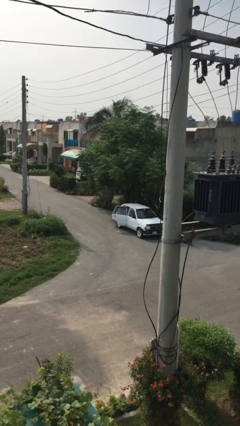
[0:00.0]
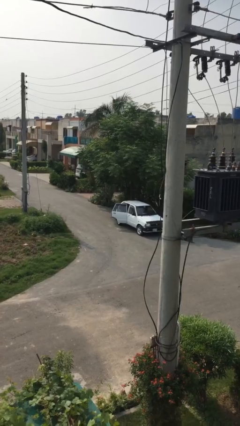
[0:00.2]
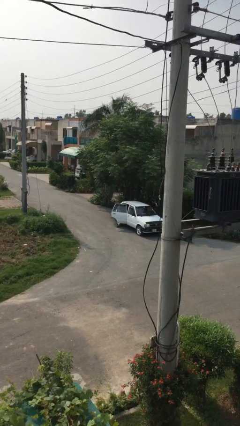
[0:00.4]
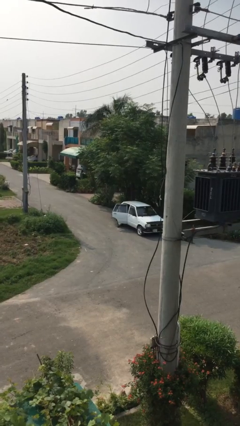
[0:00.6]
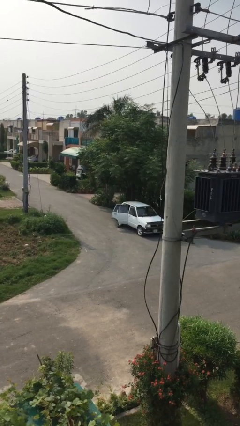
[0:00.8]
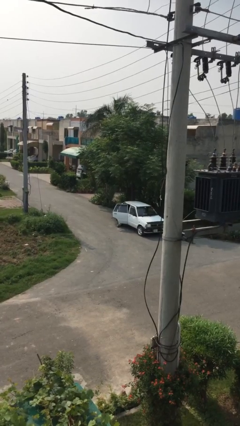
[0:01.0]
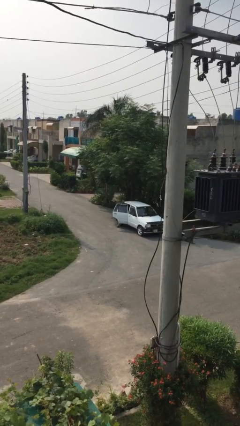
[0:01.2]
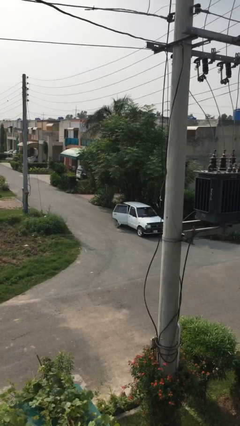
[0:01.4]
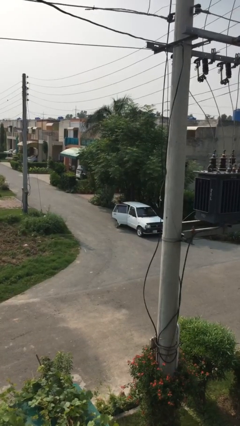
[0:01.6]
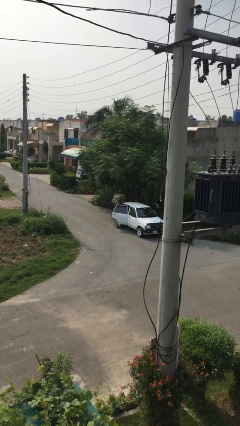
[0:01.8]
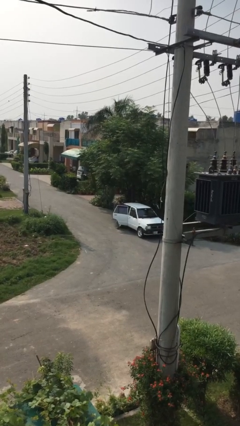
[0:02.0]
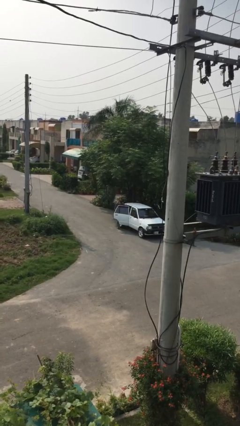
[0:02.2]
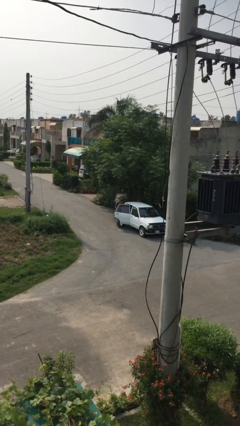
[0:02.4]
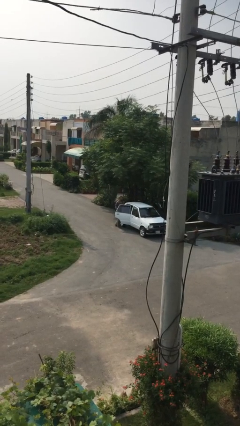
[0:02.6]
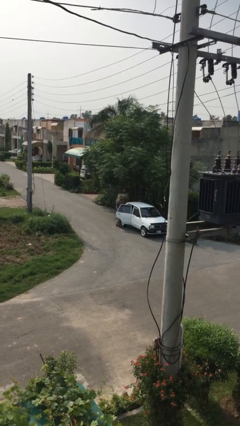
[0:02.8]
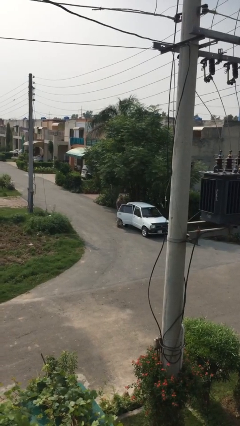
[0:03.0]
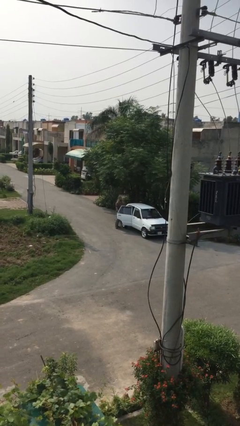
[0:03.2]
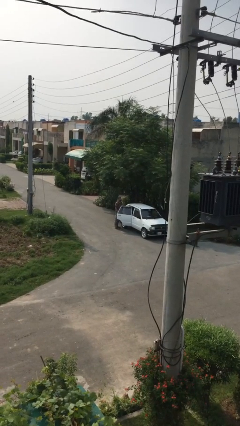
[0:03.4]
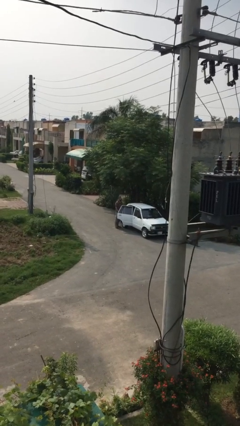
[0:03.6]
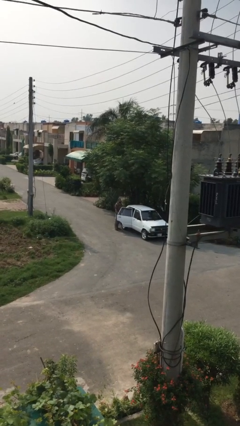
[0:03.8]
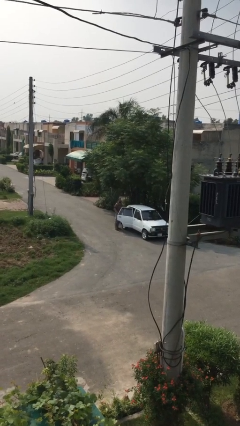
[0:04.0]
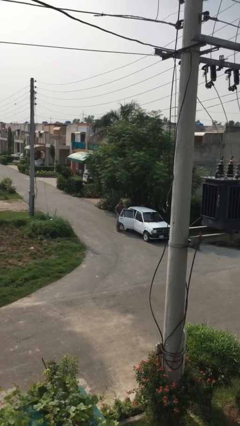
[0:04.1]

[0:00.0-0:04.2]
person exits car

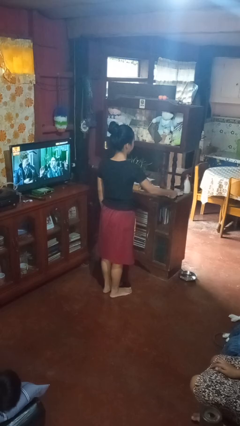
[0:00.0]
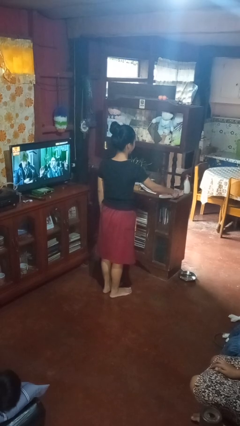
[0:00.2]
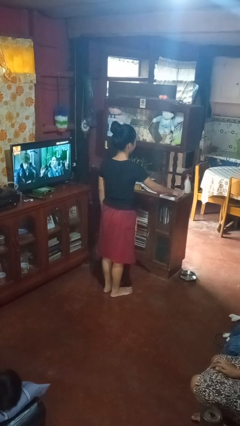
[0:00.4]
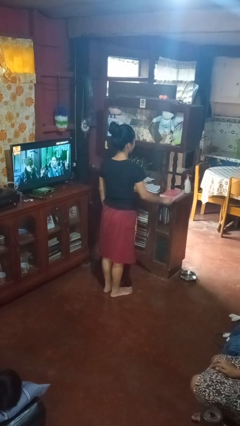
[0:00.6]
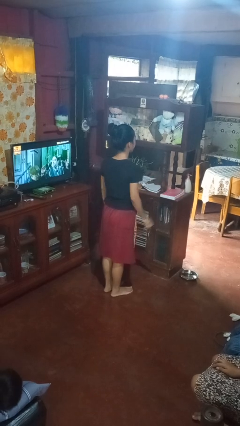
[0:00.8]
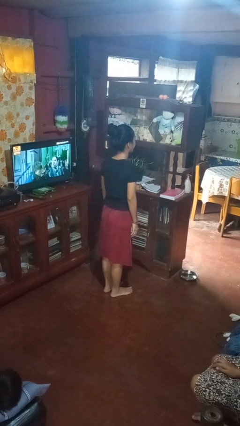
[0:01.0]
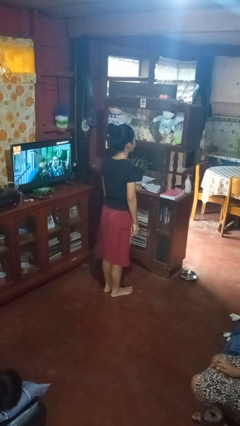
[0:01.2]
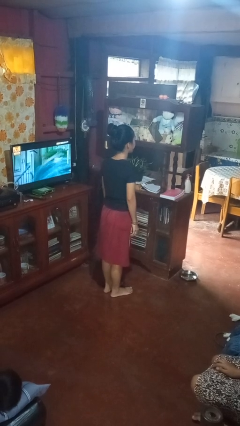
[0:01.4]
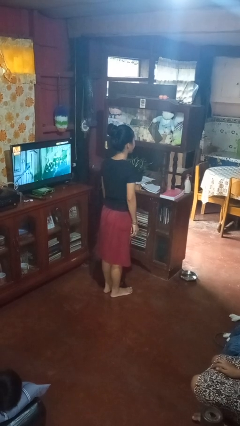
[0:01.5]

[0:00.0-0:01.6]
person puts down object on shelf

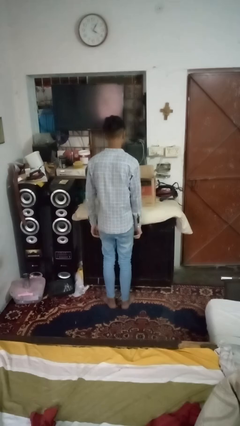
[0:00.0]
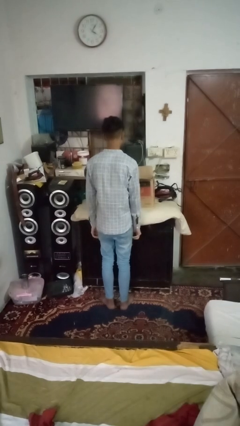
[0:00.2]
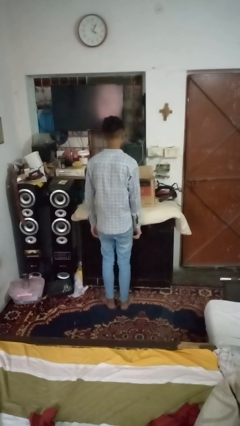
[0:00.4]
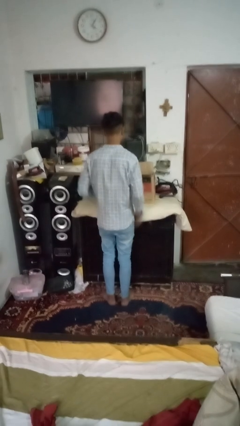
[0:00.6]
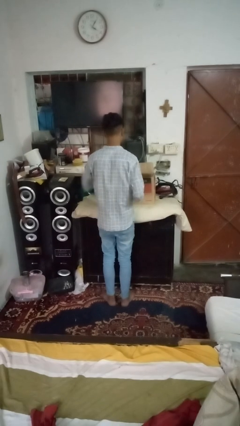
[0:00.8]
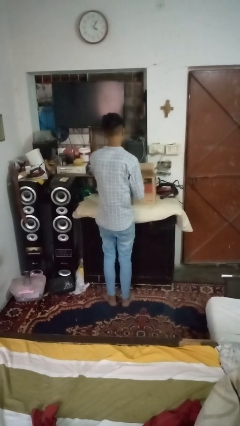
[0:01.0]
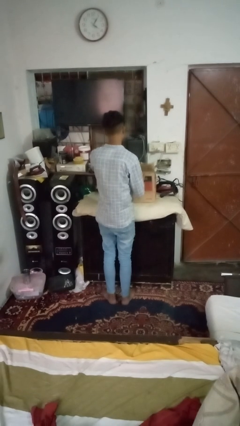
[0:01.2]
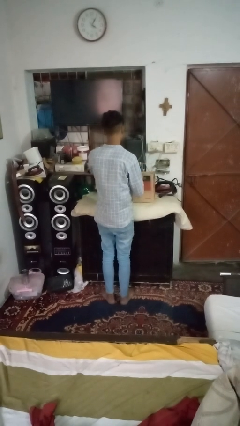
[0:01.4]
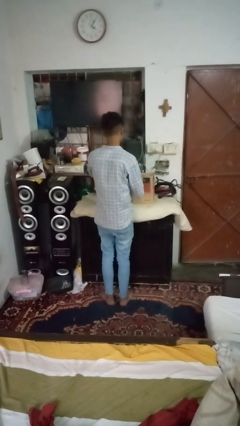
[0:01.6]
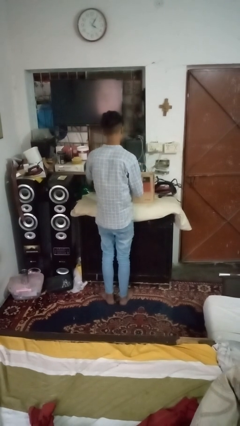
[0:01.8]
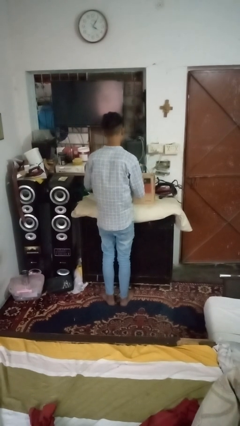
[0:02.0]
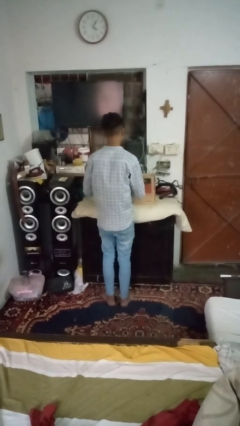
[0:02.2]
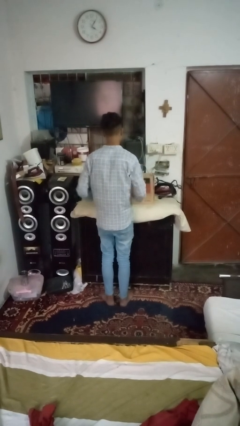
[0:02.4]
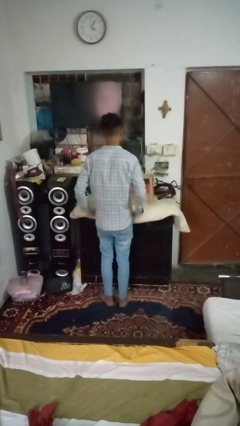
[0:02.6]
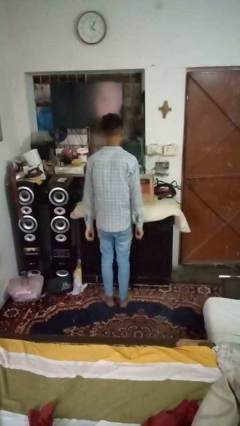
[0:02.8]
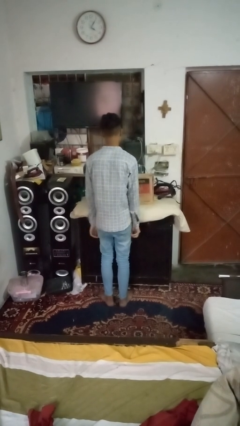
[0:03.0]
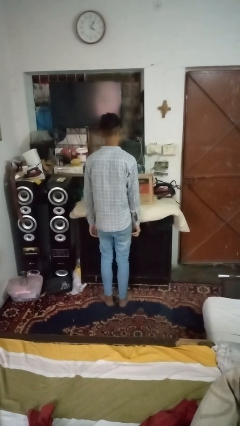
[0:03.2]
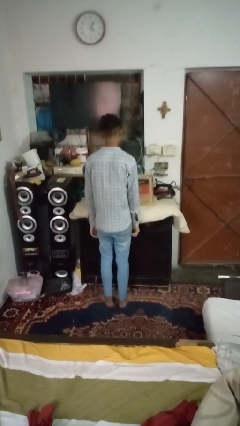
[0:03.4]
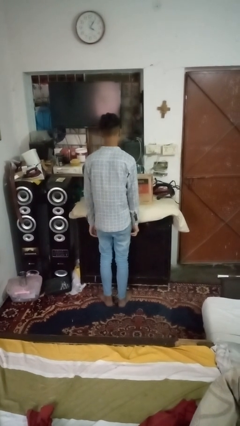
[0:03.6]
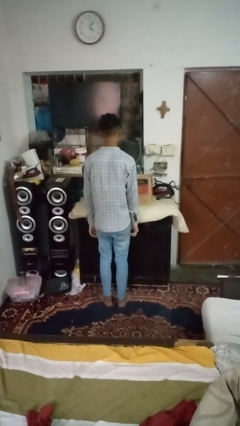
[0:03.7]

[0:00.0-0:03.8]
person closes box

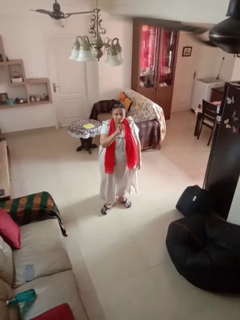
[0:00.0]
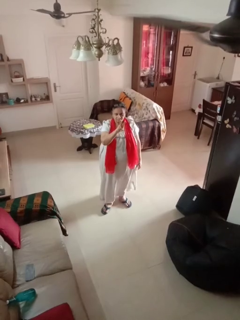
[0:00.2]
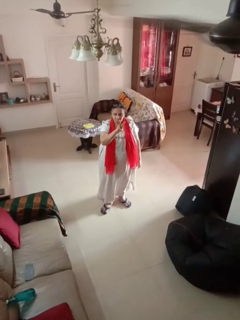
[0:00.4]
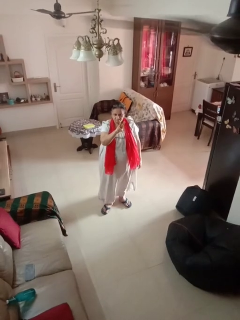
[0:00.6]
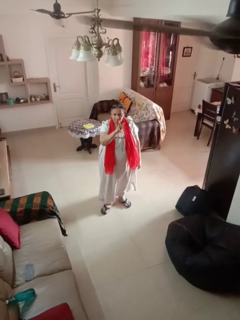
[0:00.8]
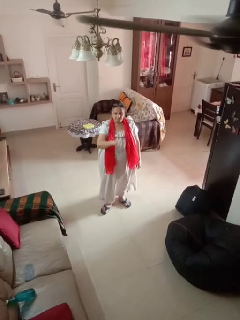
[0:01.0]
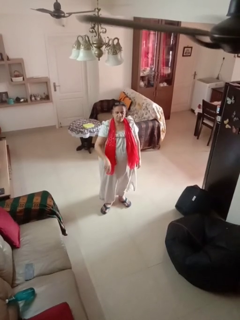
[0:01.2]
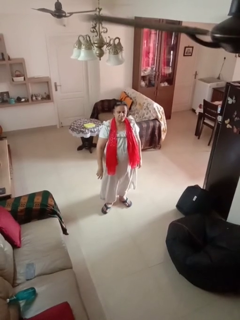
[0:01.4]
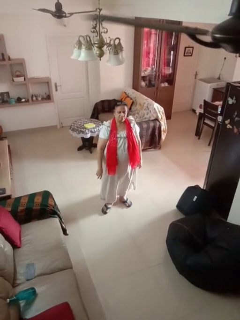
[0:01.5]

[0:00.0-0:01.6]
person gestures peace

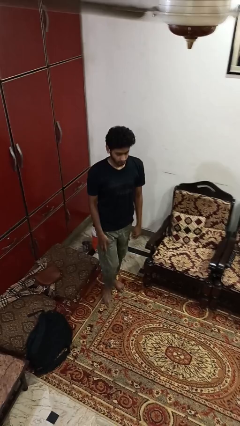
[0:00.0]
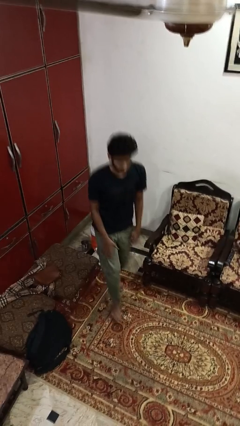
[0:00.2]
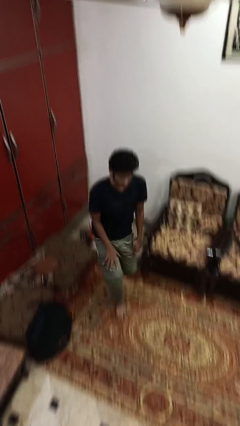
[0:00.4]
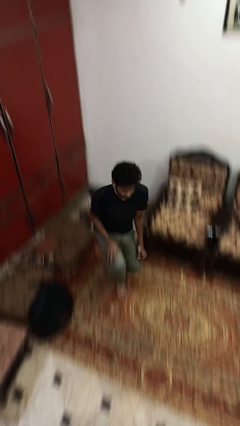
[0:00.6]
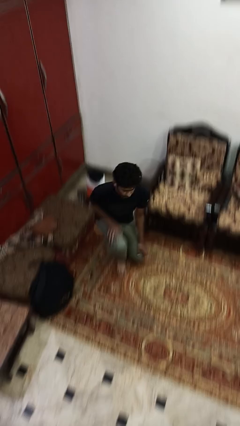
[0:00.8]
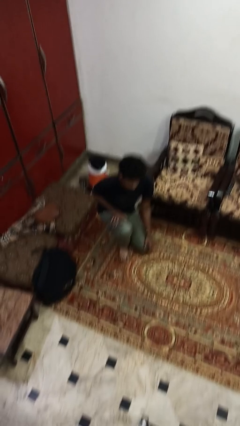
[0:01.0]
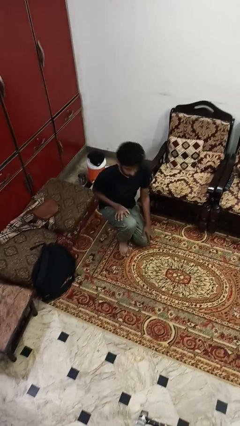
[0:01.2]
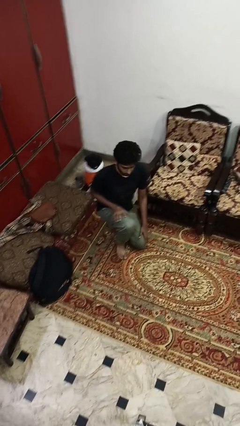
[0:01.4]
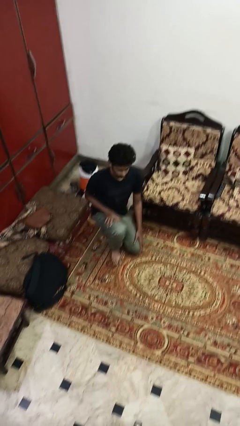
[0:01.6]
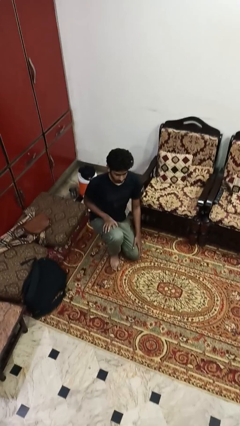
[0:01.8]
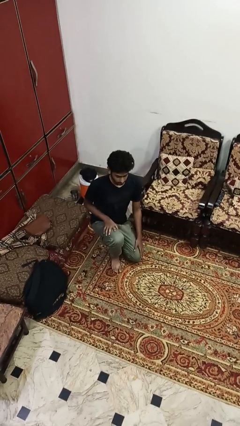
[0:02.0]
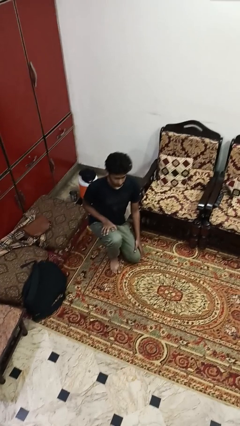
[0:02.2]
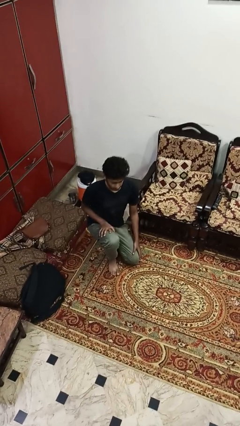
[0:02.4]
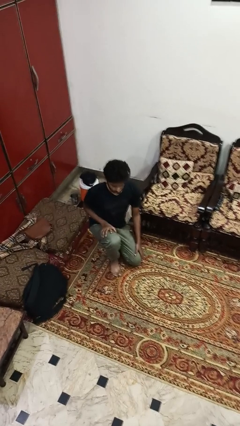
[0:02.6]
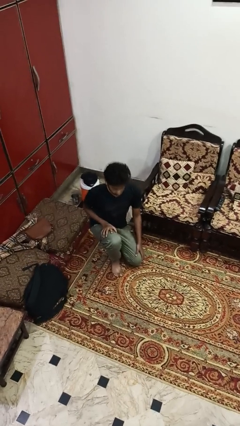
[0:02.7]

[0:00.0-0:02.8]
person kneels

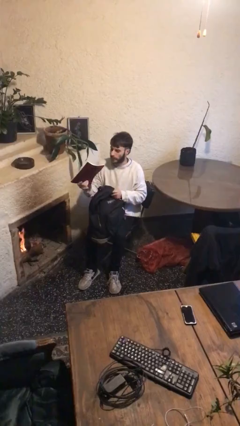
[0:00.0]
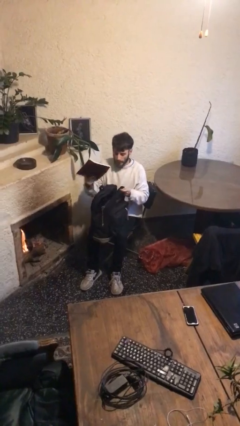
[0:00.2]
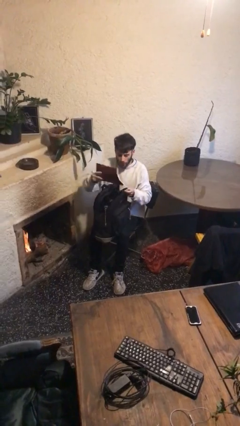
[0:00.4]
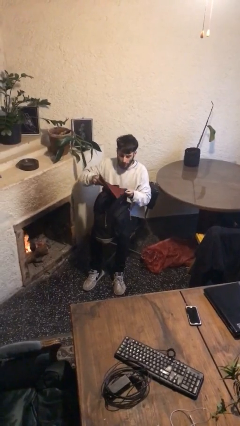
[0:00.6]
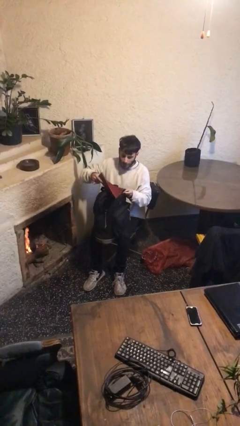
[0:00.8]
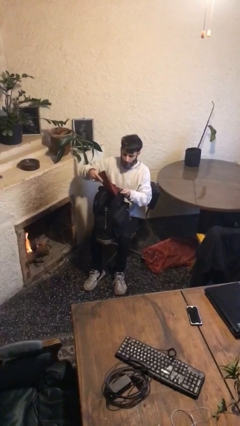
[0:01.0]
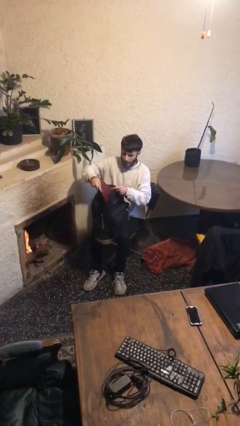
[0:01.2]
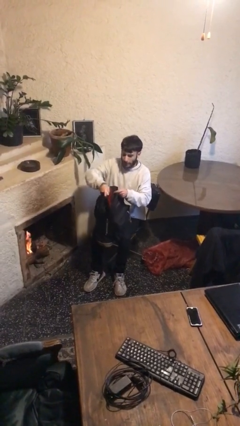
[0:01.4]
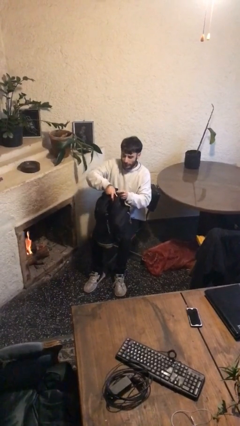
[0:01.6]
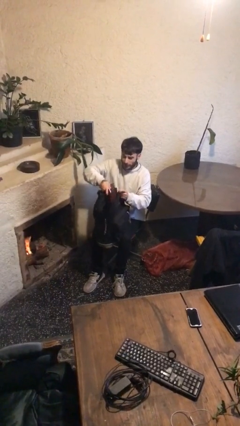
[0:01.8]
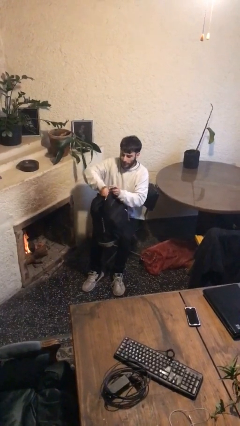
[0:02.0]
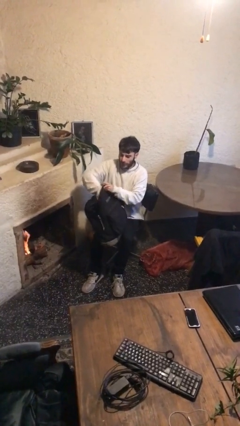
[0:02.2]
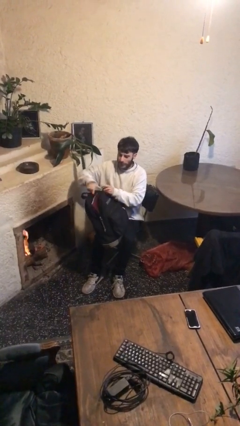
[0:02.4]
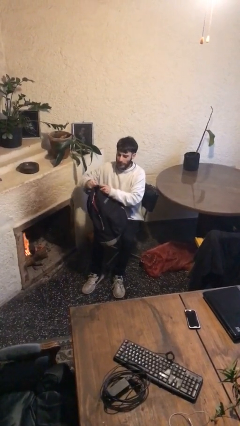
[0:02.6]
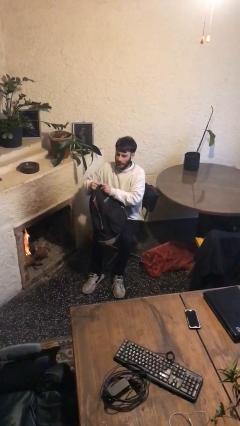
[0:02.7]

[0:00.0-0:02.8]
person puts object into backpack

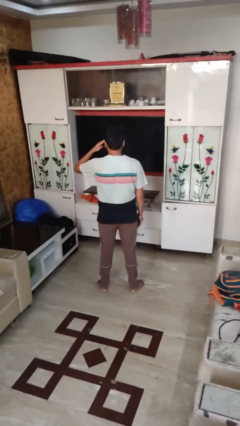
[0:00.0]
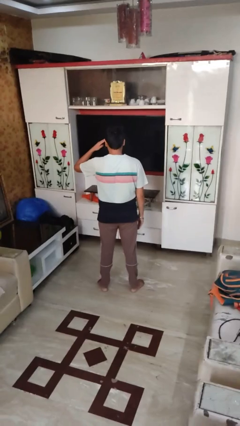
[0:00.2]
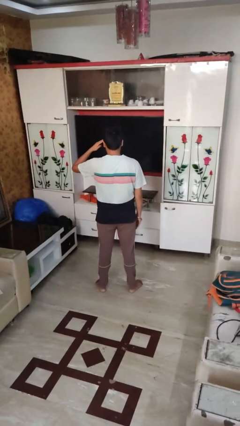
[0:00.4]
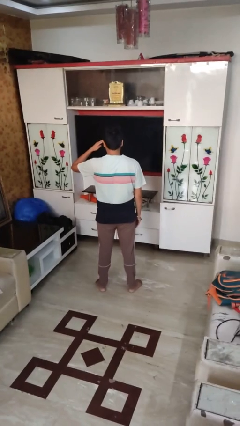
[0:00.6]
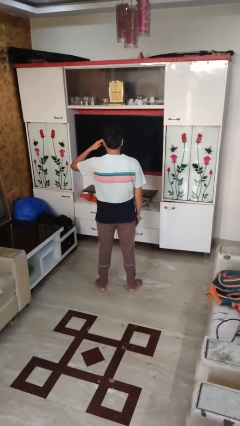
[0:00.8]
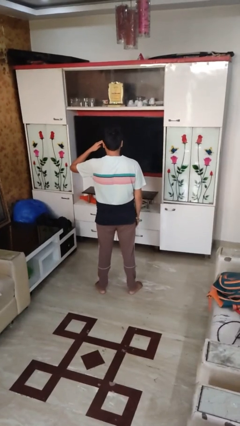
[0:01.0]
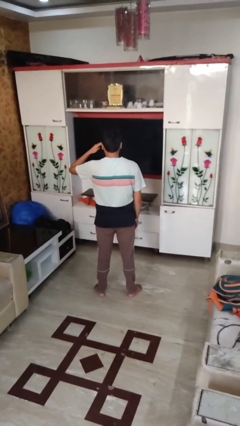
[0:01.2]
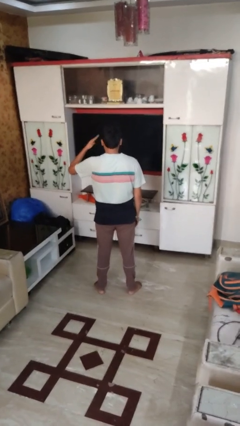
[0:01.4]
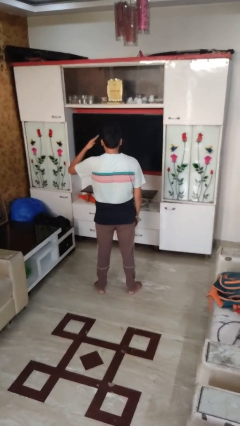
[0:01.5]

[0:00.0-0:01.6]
person salutes
